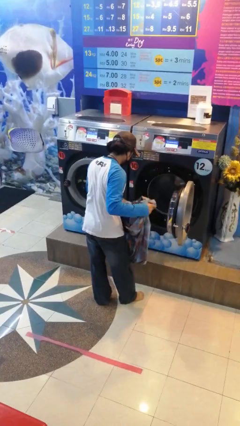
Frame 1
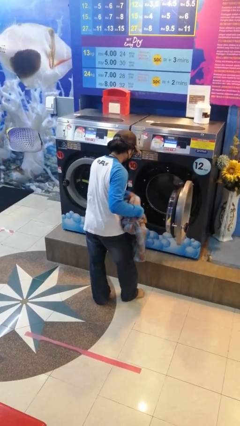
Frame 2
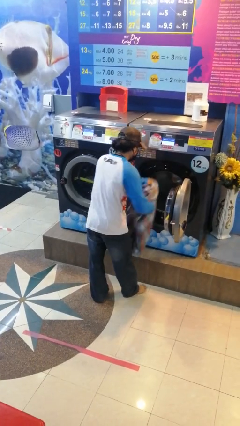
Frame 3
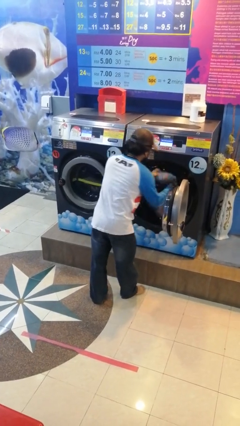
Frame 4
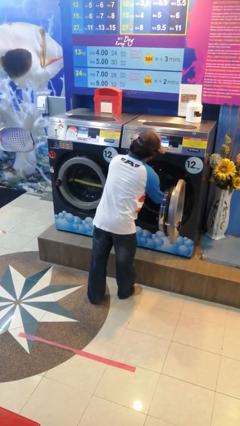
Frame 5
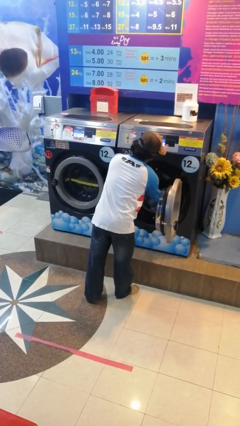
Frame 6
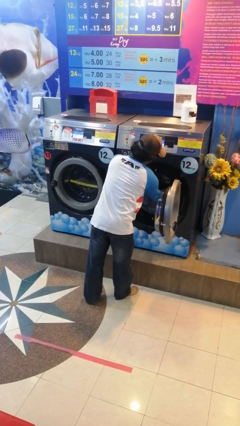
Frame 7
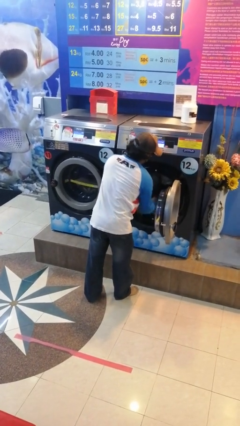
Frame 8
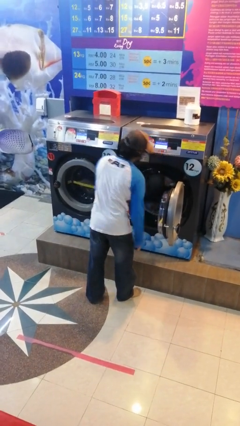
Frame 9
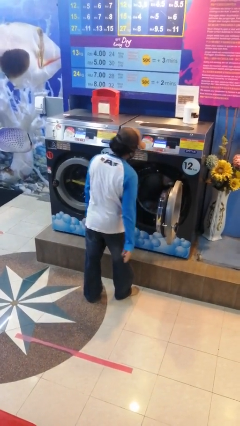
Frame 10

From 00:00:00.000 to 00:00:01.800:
person loads clotheswasher

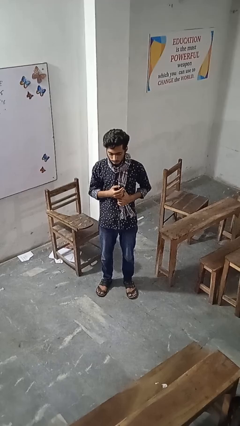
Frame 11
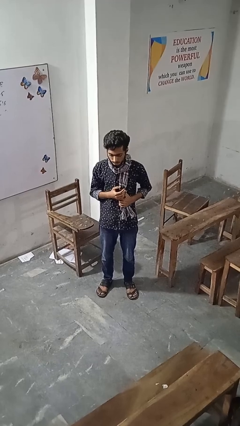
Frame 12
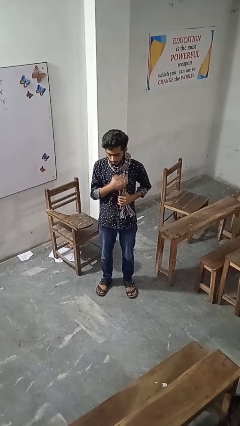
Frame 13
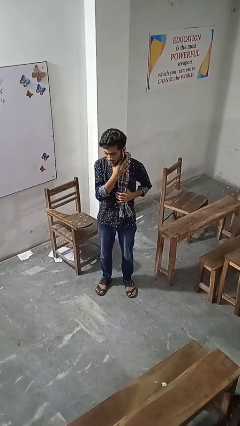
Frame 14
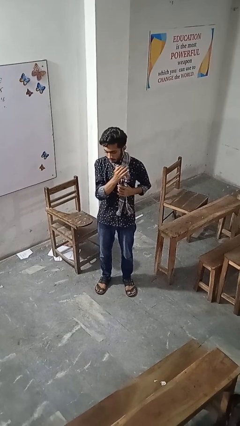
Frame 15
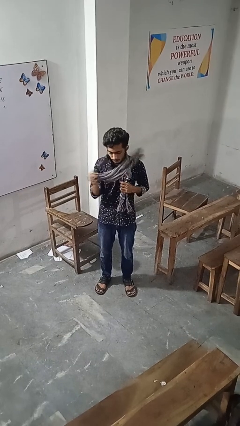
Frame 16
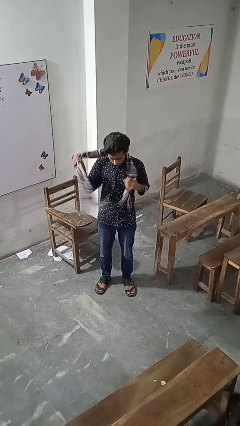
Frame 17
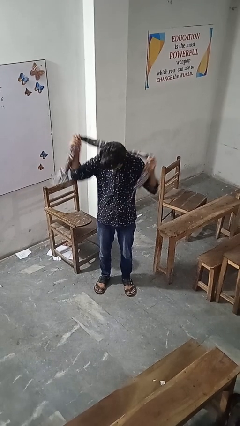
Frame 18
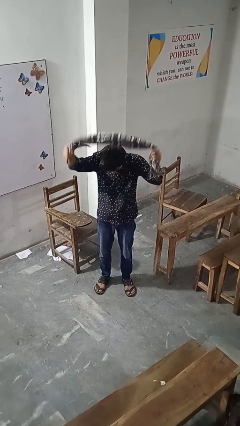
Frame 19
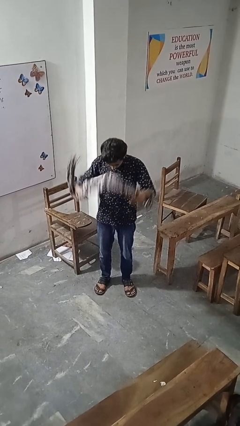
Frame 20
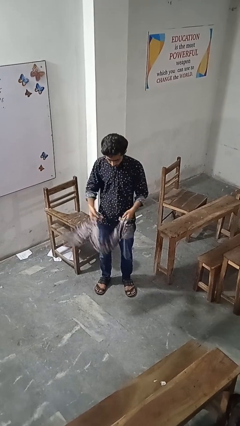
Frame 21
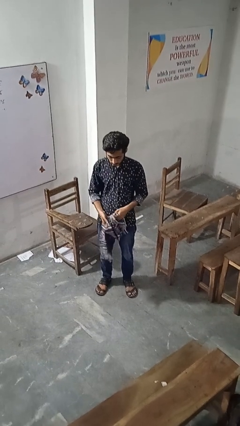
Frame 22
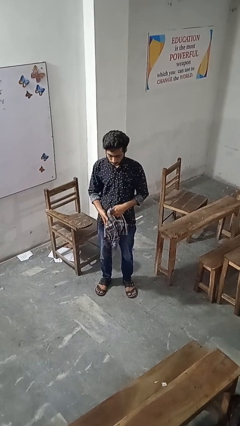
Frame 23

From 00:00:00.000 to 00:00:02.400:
person takes off scarf

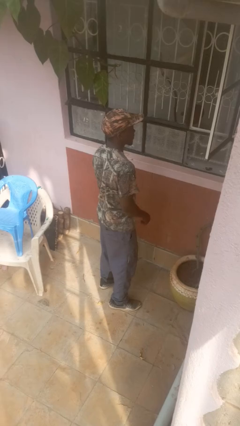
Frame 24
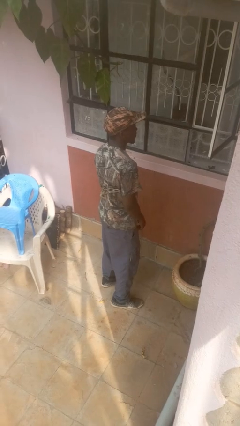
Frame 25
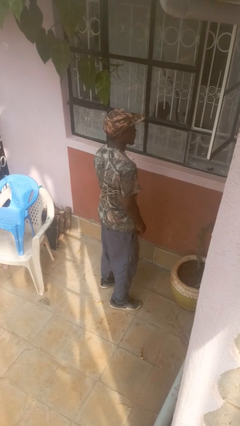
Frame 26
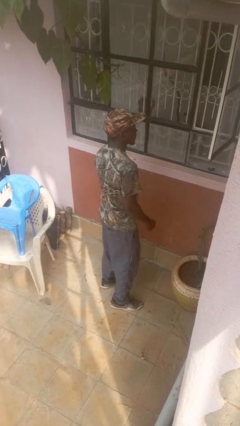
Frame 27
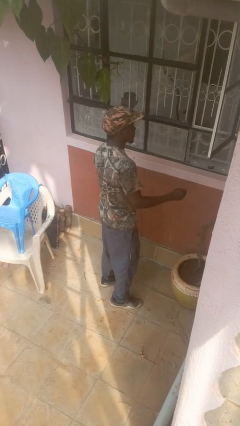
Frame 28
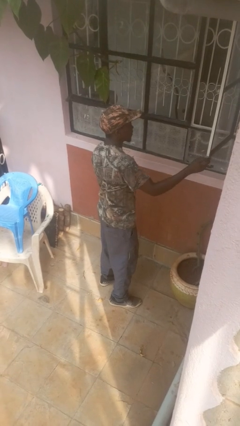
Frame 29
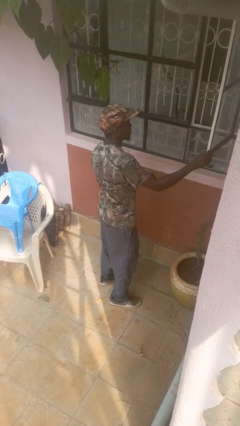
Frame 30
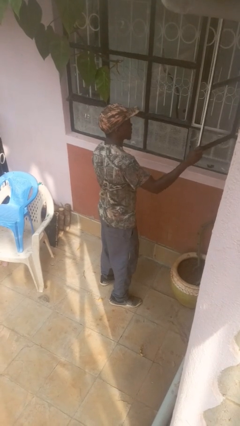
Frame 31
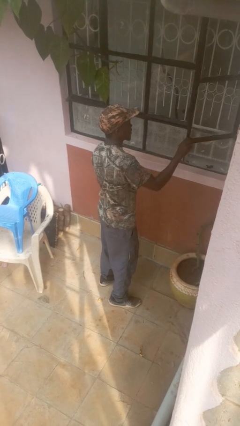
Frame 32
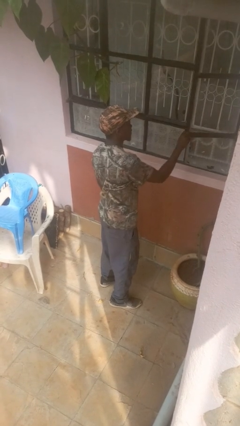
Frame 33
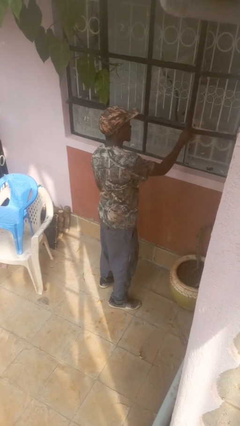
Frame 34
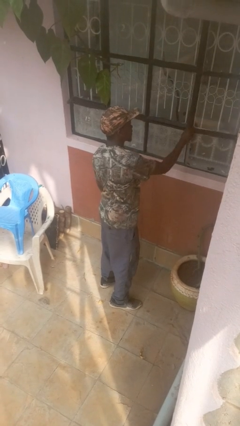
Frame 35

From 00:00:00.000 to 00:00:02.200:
person closes home window

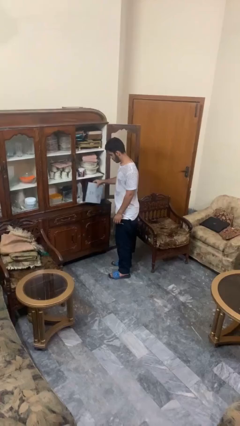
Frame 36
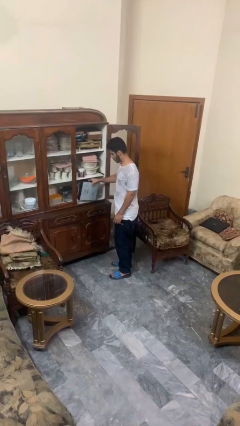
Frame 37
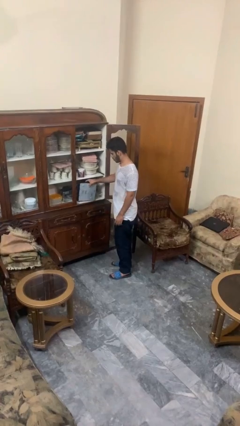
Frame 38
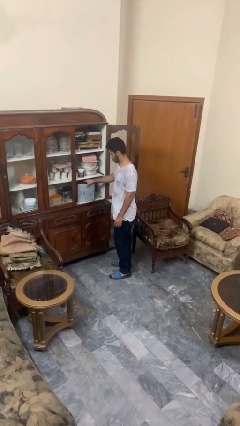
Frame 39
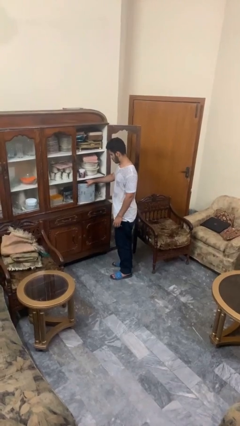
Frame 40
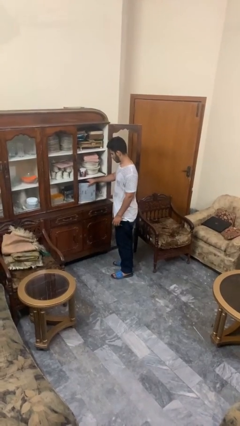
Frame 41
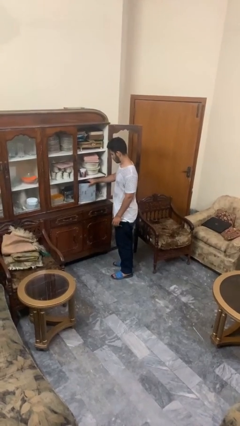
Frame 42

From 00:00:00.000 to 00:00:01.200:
person puts down object into cabinet

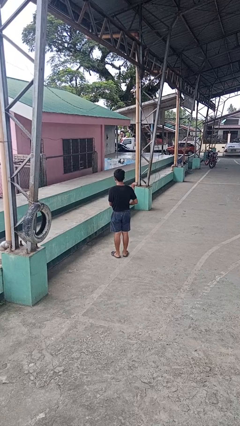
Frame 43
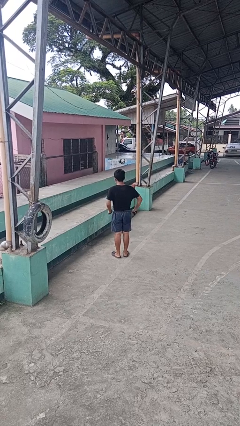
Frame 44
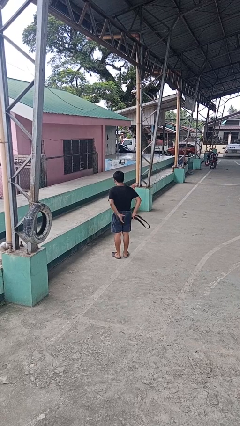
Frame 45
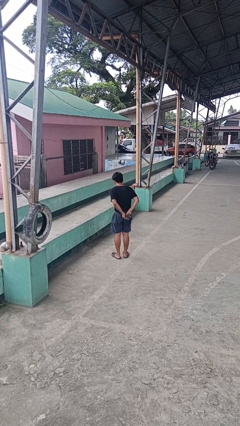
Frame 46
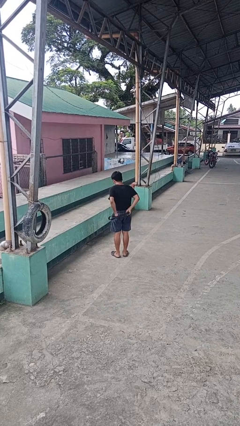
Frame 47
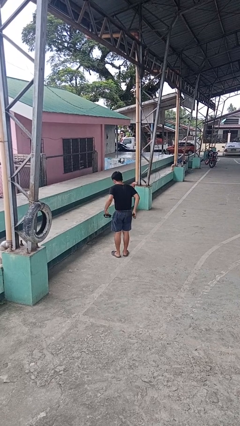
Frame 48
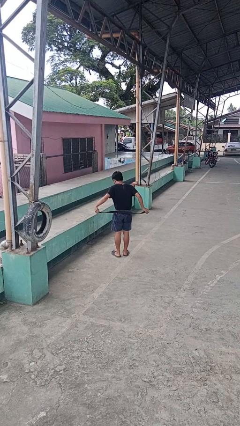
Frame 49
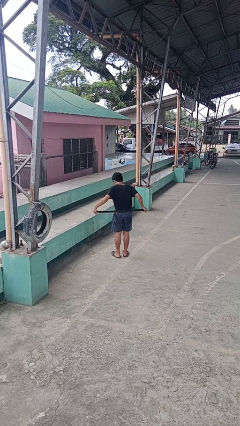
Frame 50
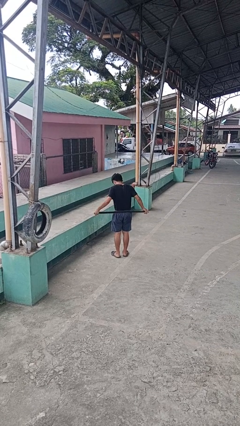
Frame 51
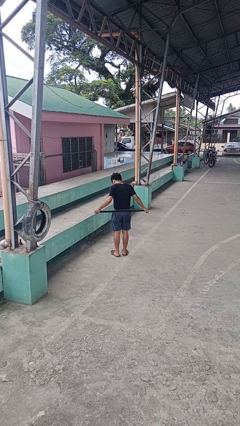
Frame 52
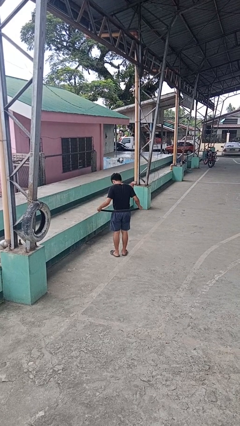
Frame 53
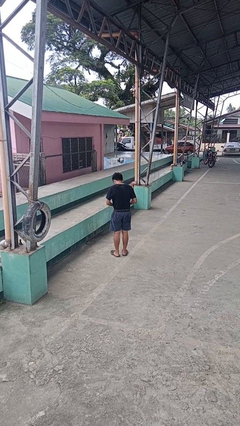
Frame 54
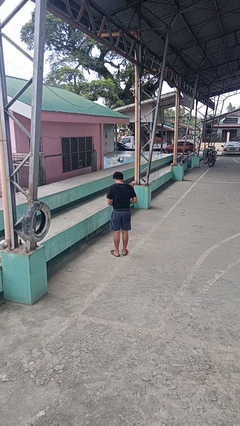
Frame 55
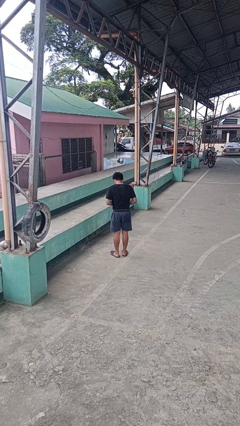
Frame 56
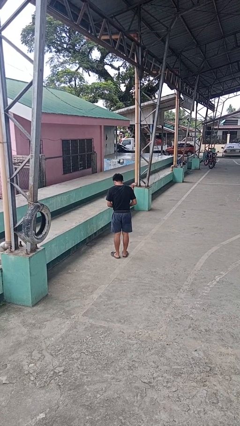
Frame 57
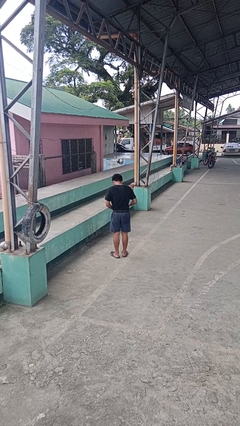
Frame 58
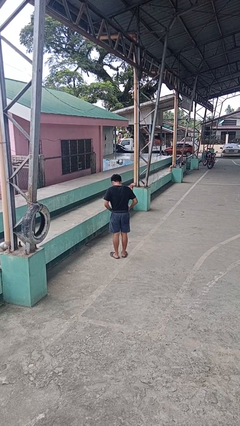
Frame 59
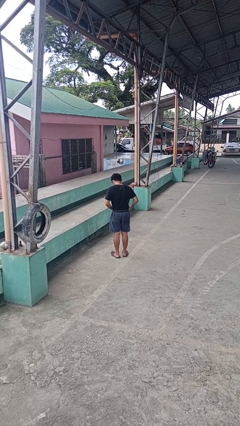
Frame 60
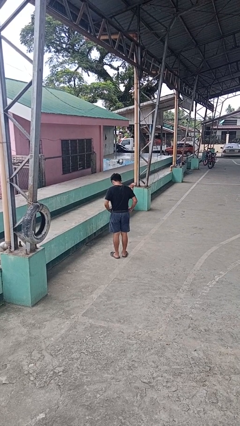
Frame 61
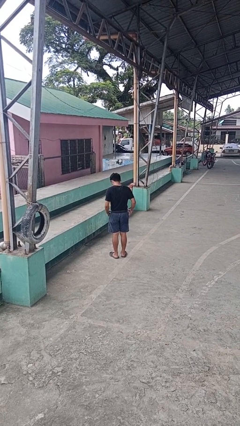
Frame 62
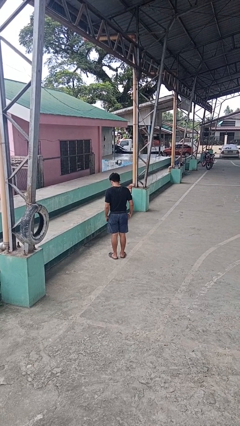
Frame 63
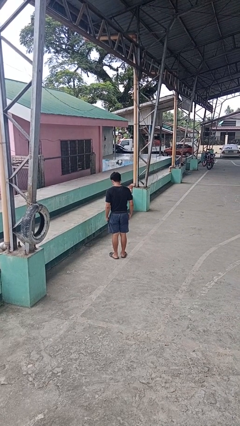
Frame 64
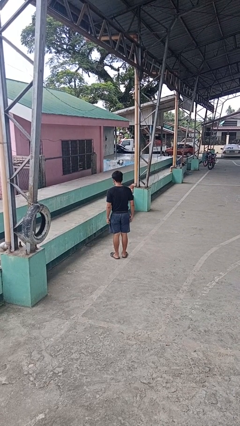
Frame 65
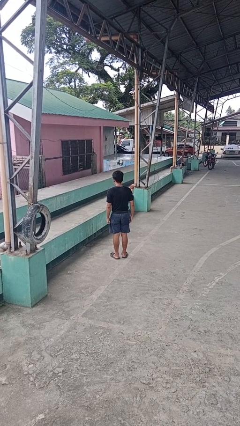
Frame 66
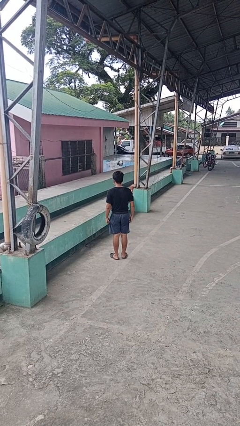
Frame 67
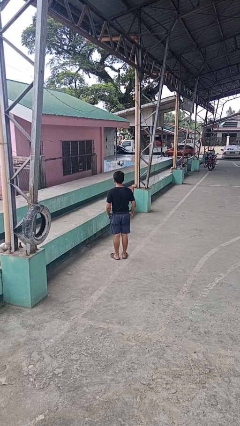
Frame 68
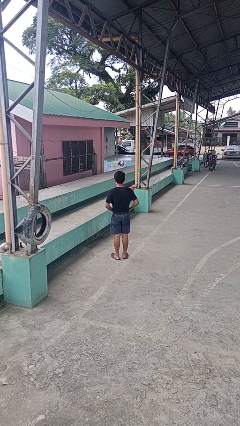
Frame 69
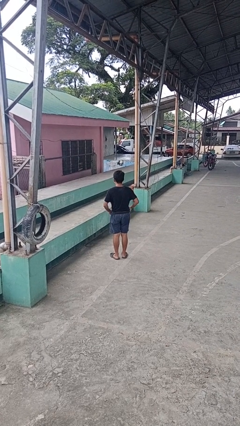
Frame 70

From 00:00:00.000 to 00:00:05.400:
person puts on belt

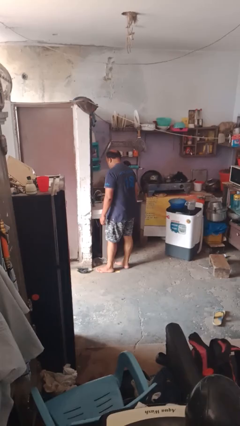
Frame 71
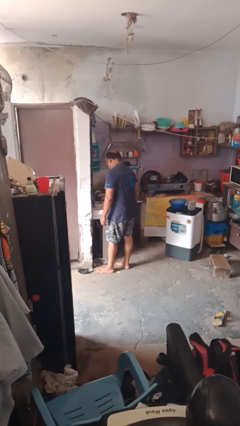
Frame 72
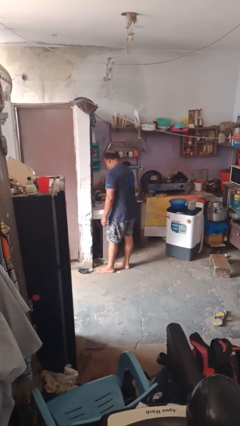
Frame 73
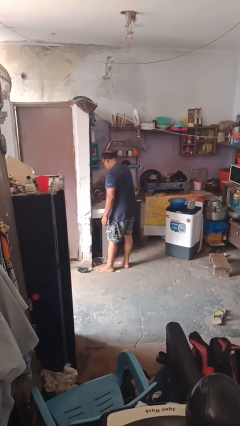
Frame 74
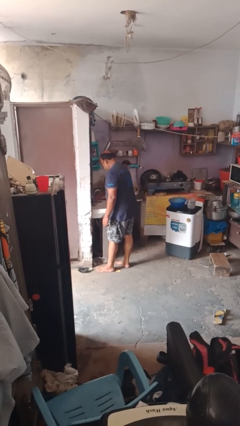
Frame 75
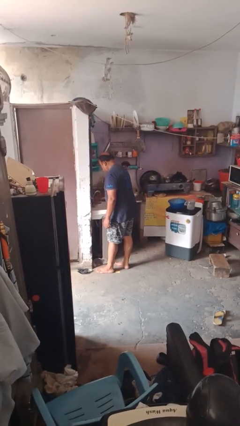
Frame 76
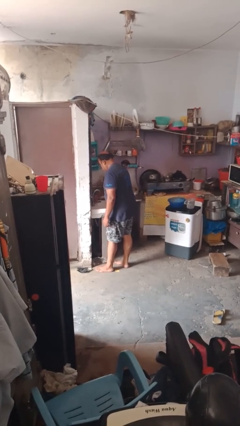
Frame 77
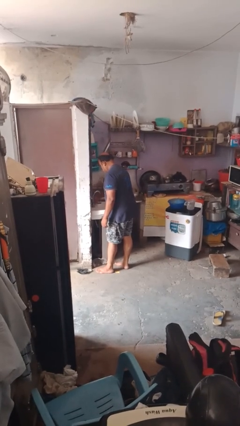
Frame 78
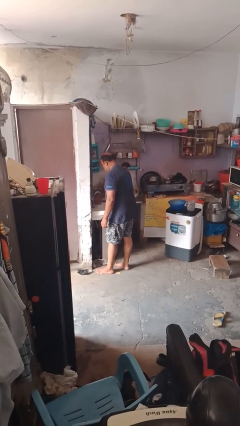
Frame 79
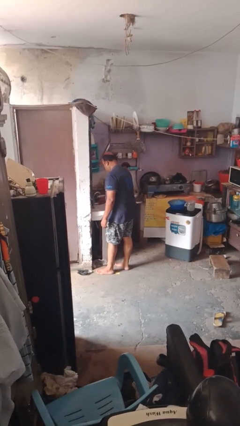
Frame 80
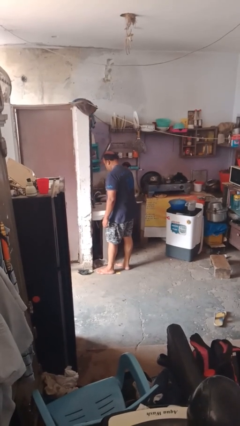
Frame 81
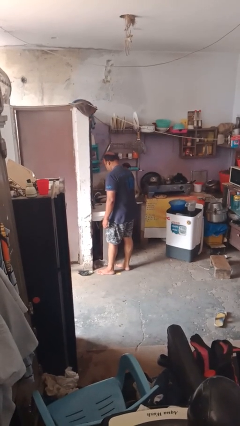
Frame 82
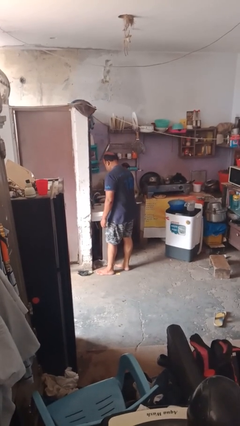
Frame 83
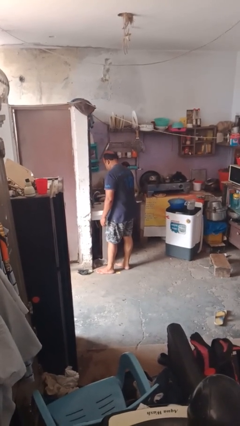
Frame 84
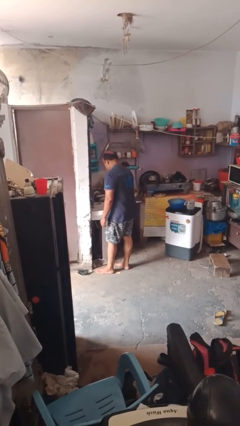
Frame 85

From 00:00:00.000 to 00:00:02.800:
person turns off faucet

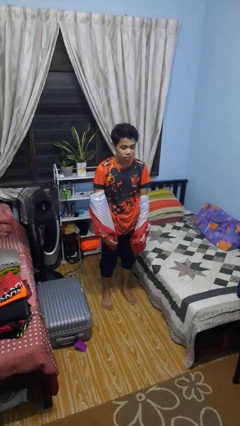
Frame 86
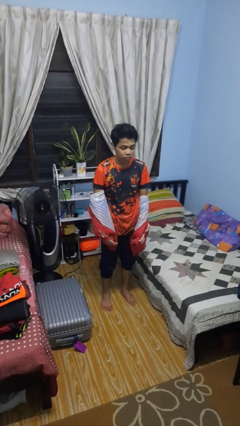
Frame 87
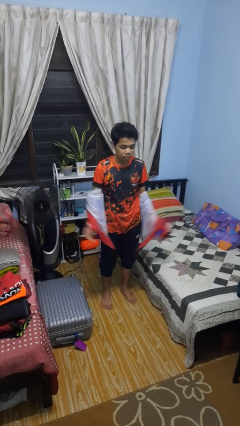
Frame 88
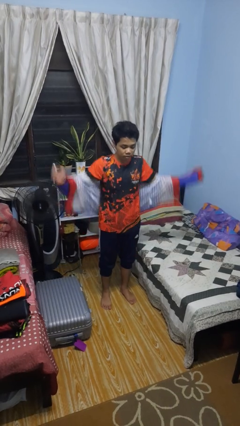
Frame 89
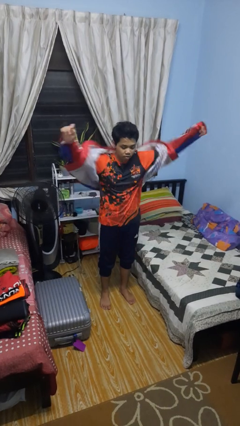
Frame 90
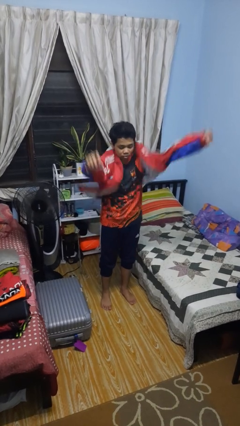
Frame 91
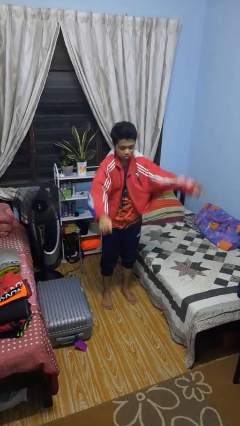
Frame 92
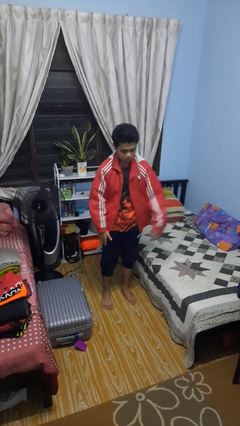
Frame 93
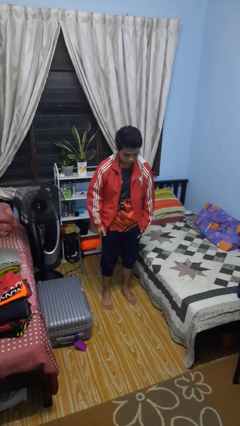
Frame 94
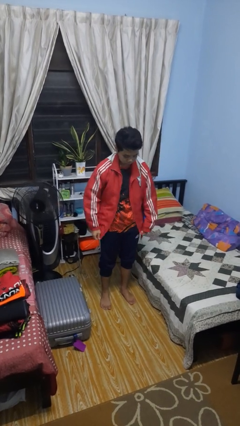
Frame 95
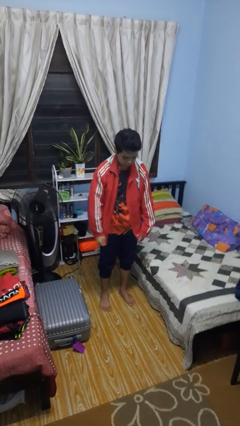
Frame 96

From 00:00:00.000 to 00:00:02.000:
person puts on jacket
